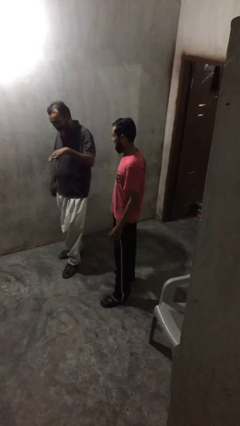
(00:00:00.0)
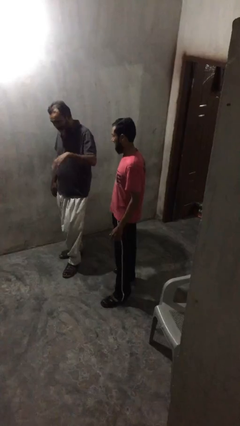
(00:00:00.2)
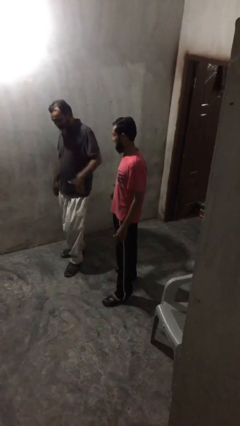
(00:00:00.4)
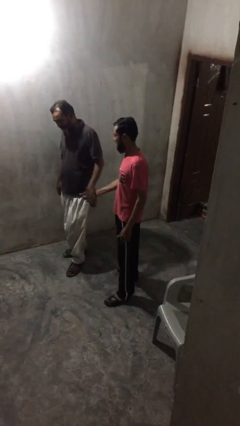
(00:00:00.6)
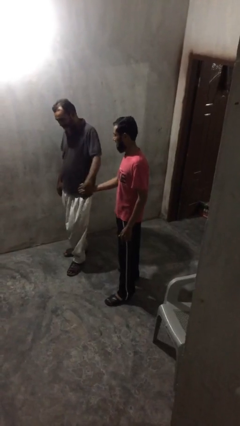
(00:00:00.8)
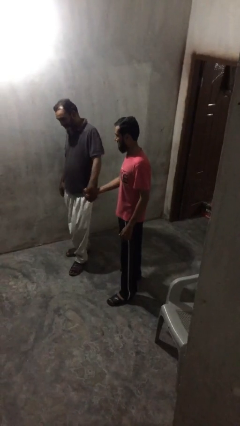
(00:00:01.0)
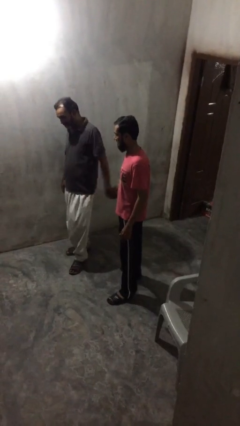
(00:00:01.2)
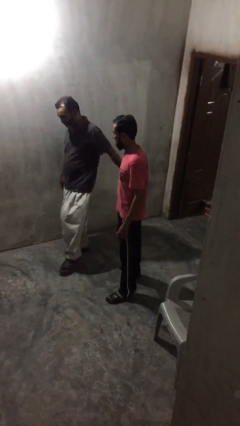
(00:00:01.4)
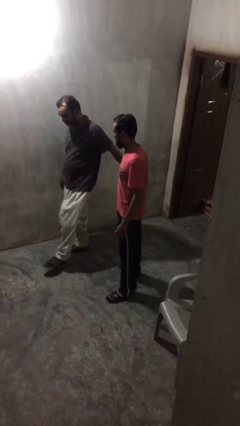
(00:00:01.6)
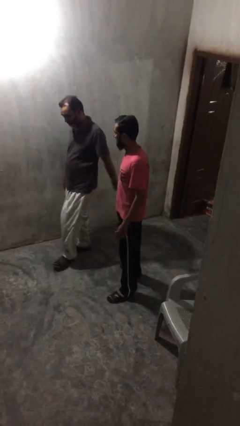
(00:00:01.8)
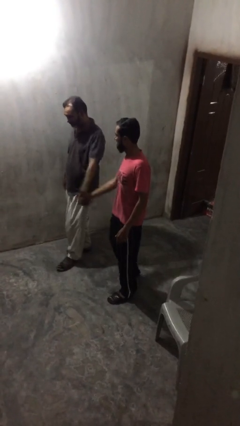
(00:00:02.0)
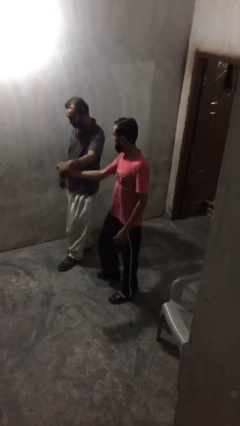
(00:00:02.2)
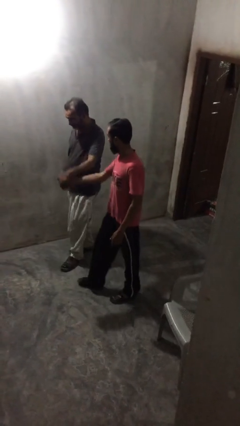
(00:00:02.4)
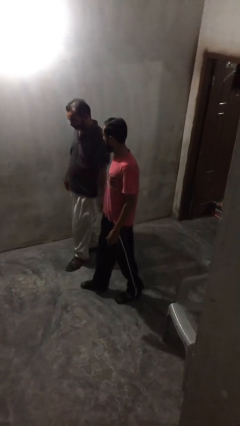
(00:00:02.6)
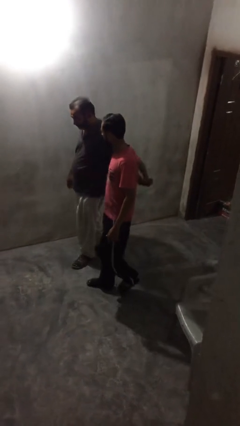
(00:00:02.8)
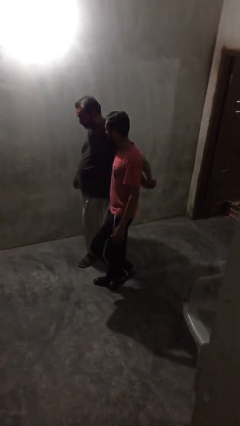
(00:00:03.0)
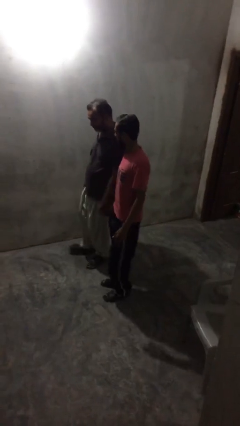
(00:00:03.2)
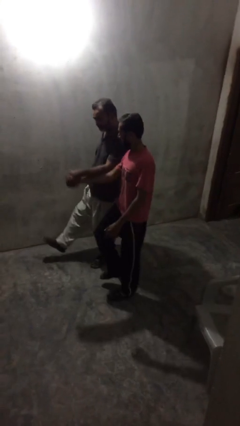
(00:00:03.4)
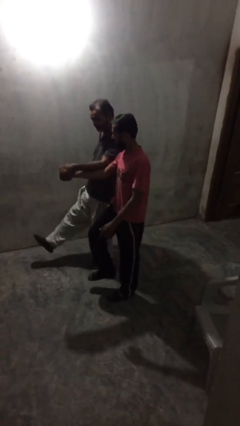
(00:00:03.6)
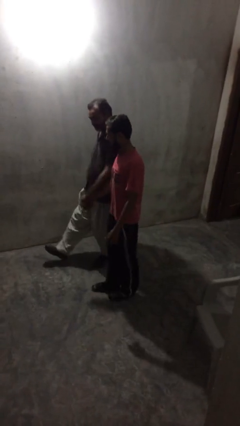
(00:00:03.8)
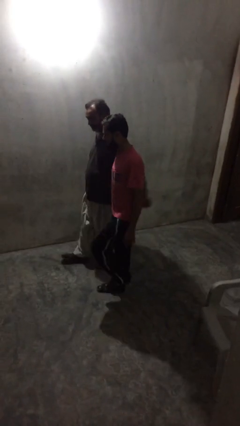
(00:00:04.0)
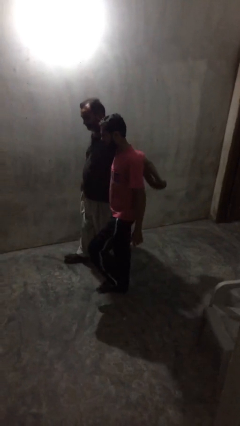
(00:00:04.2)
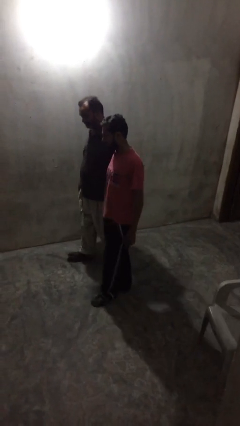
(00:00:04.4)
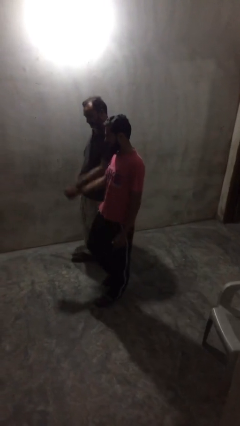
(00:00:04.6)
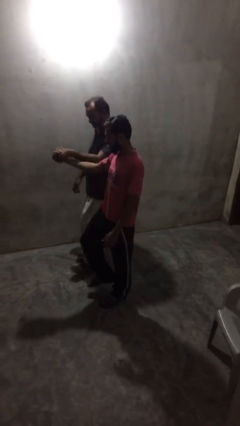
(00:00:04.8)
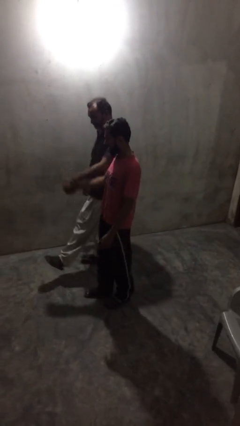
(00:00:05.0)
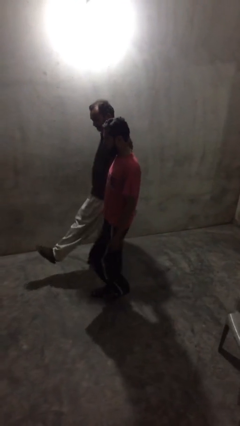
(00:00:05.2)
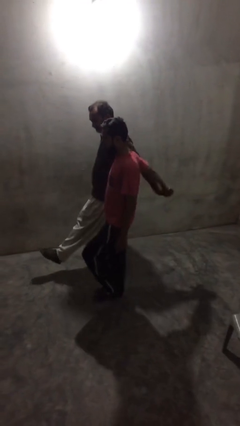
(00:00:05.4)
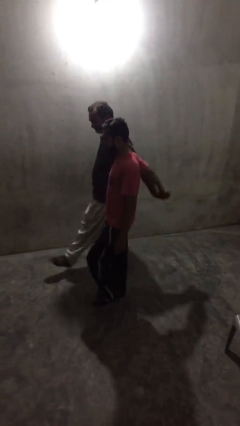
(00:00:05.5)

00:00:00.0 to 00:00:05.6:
person holds hand

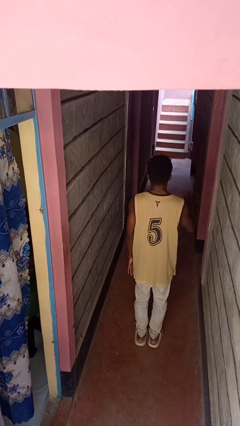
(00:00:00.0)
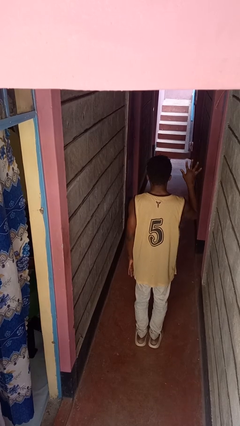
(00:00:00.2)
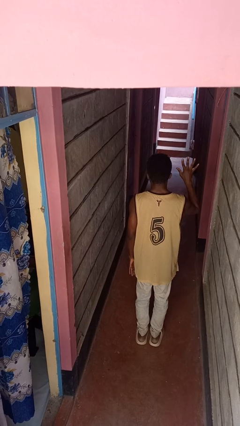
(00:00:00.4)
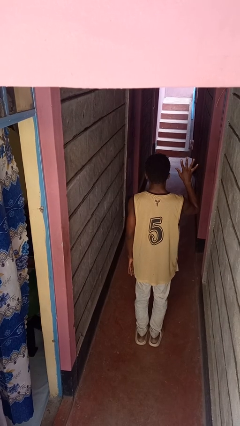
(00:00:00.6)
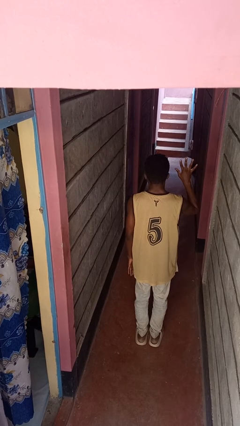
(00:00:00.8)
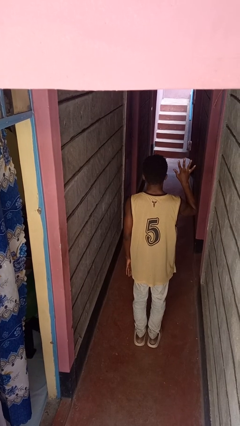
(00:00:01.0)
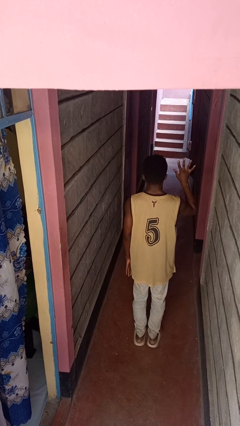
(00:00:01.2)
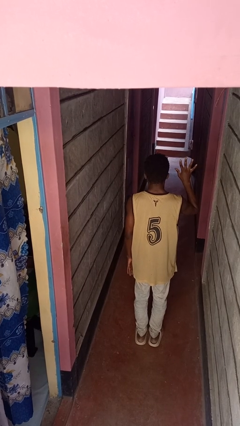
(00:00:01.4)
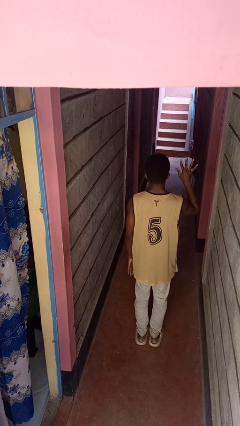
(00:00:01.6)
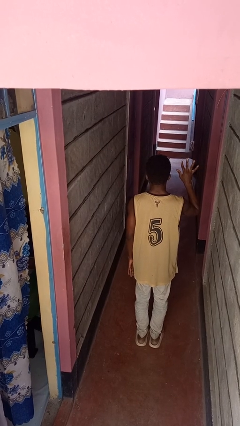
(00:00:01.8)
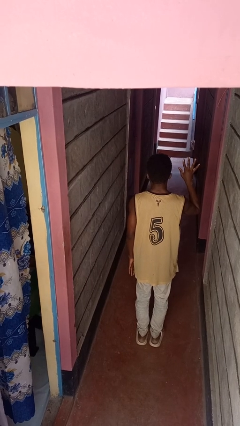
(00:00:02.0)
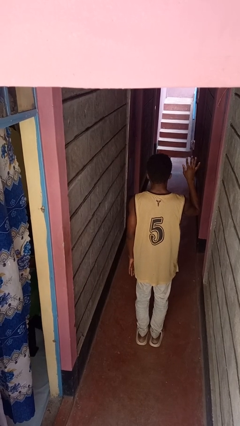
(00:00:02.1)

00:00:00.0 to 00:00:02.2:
person gestures number five

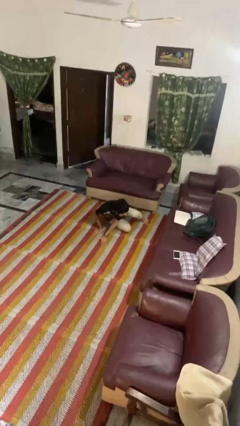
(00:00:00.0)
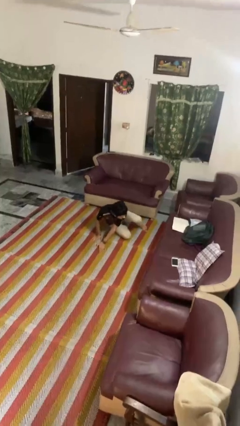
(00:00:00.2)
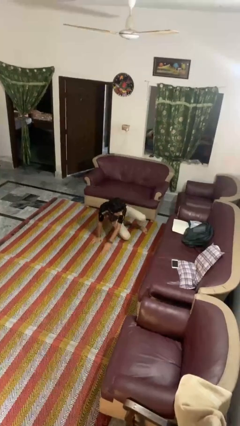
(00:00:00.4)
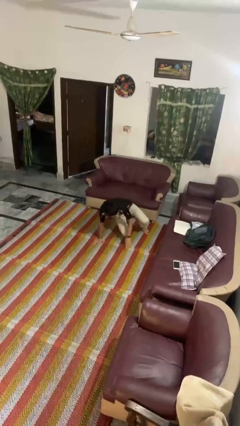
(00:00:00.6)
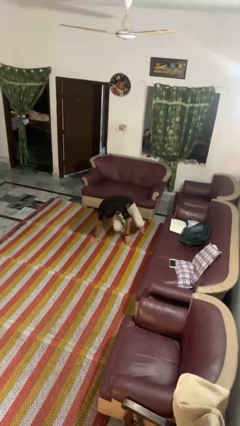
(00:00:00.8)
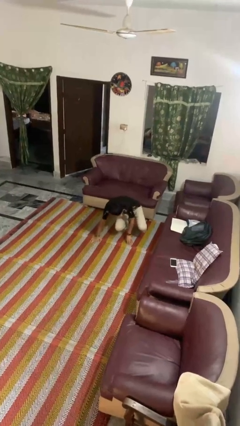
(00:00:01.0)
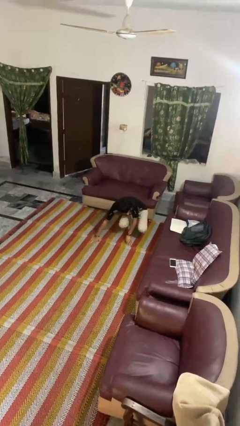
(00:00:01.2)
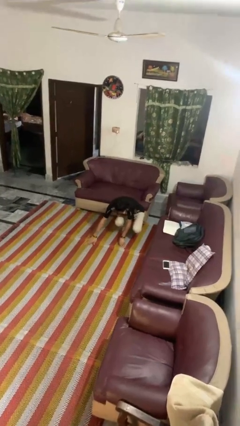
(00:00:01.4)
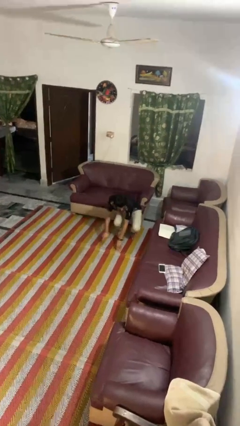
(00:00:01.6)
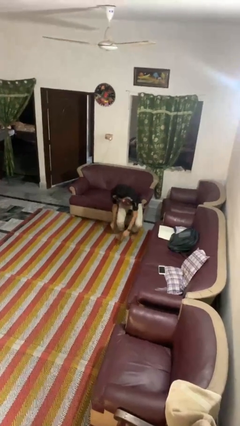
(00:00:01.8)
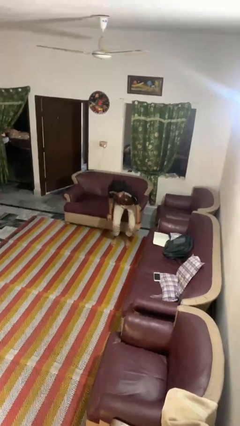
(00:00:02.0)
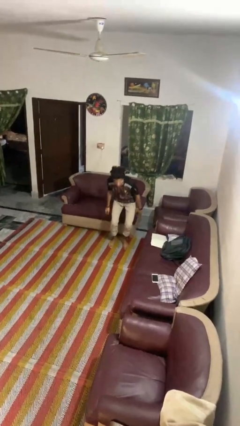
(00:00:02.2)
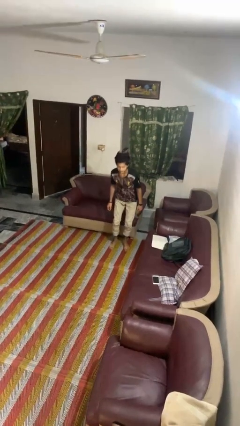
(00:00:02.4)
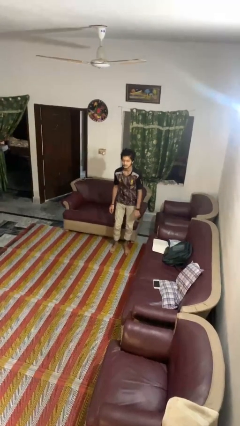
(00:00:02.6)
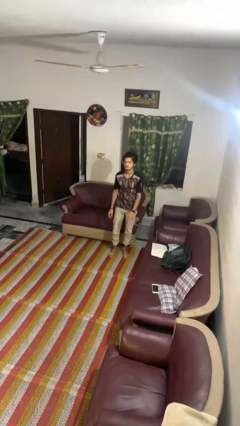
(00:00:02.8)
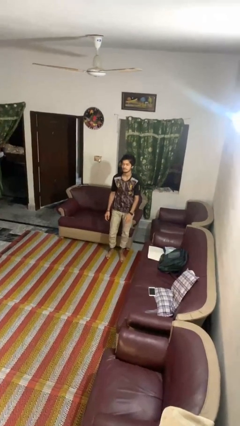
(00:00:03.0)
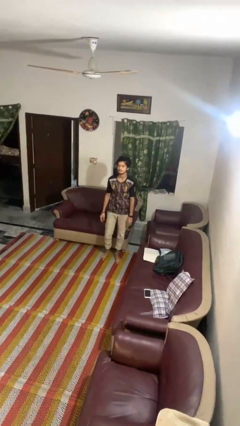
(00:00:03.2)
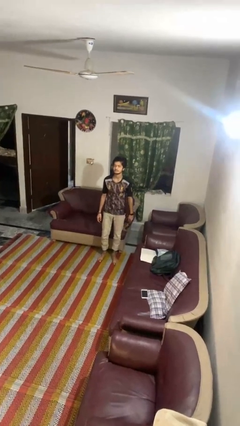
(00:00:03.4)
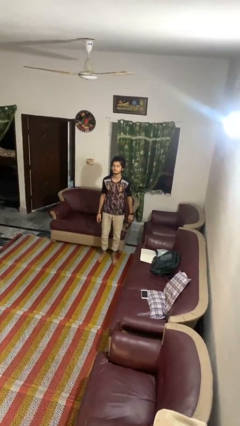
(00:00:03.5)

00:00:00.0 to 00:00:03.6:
person stands up from floor

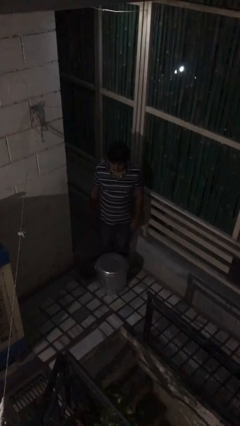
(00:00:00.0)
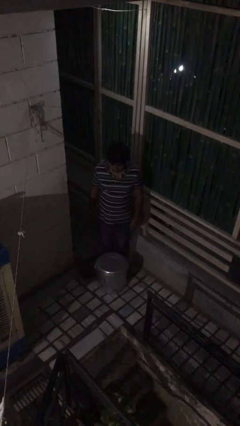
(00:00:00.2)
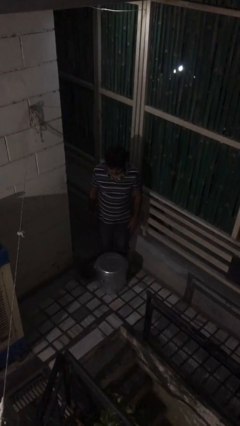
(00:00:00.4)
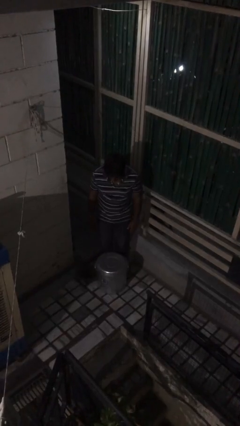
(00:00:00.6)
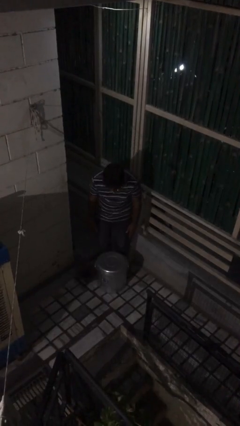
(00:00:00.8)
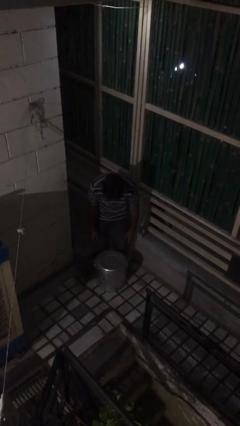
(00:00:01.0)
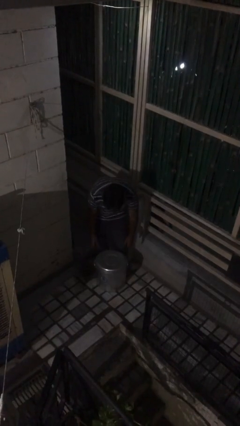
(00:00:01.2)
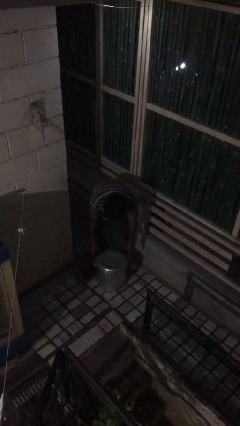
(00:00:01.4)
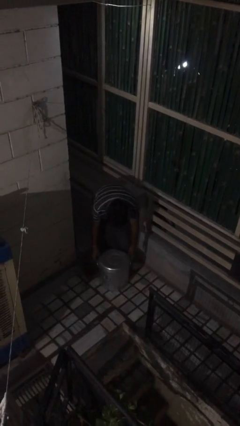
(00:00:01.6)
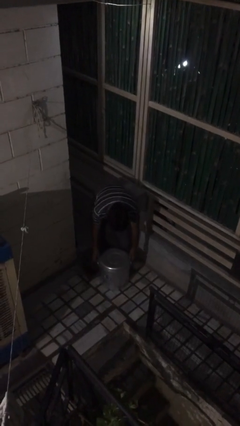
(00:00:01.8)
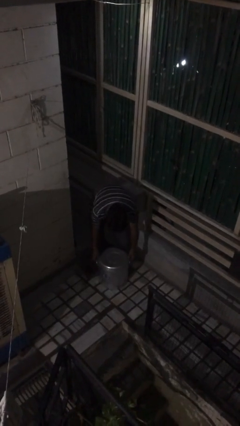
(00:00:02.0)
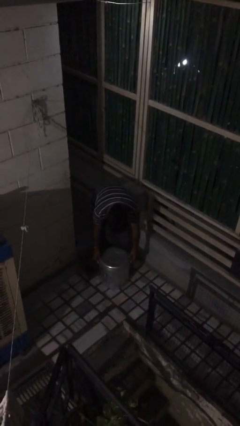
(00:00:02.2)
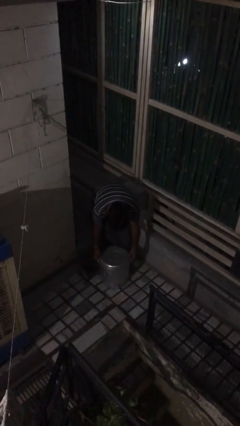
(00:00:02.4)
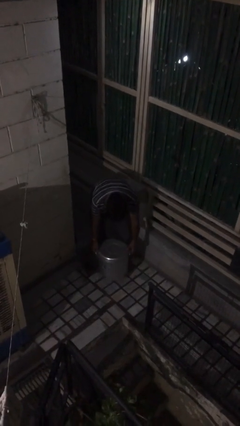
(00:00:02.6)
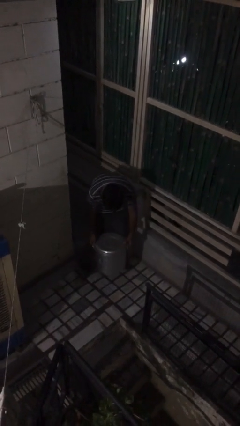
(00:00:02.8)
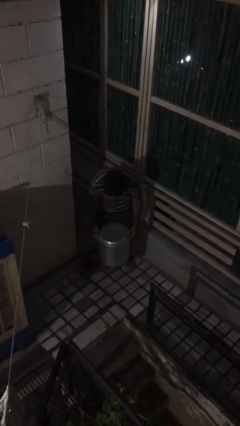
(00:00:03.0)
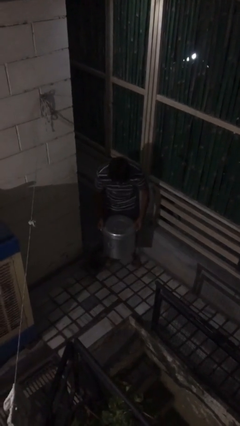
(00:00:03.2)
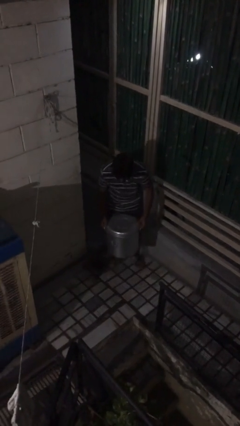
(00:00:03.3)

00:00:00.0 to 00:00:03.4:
person picks up object from floor

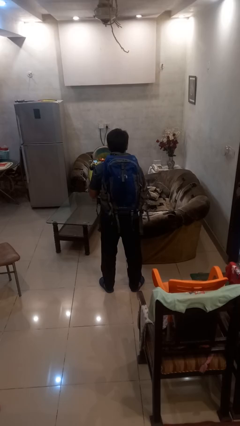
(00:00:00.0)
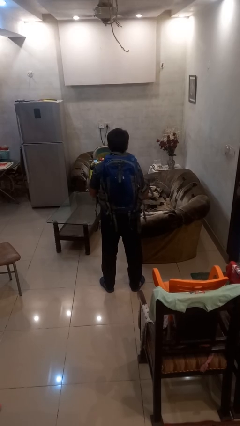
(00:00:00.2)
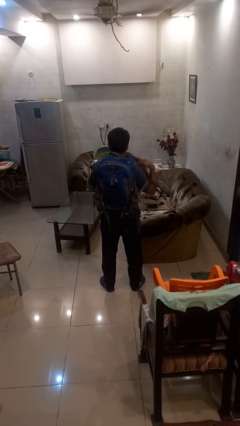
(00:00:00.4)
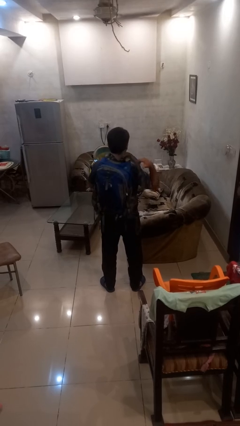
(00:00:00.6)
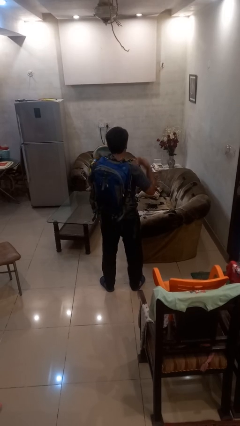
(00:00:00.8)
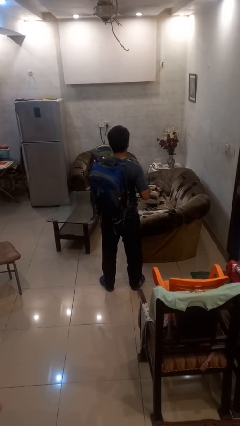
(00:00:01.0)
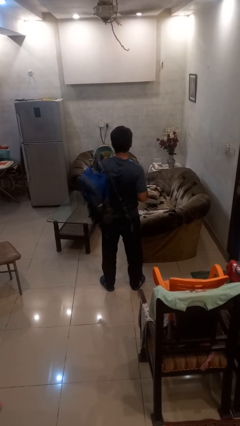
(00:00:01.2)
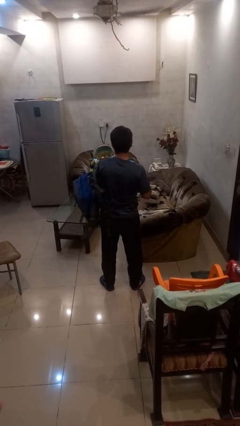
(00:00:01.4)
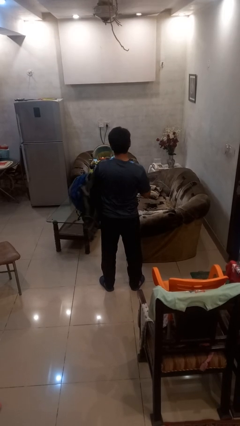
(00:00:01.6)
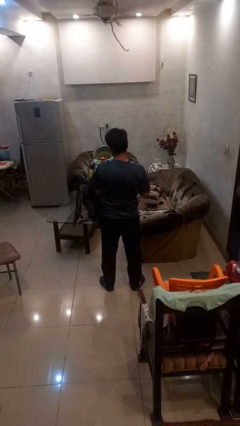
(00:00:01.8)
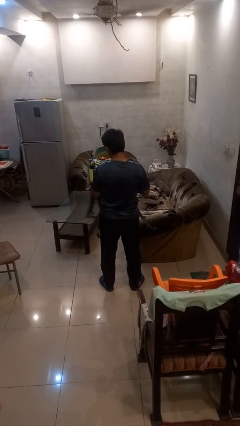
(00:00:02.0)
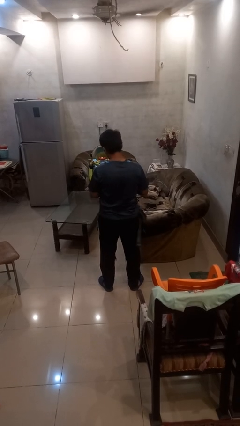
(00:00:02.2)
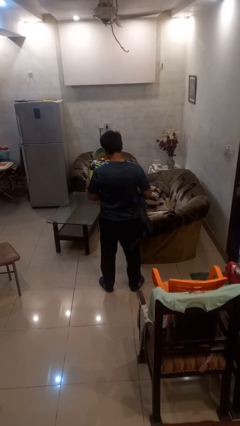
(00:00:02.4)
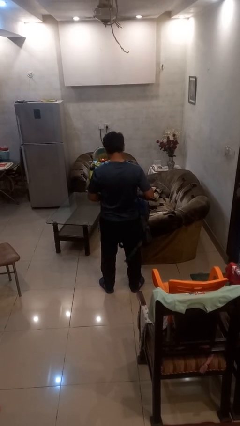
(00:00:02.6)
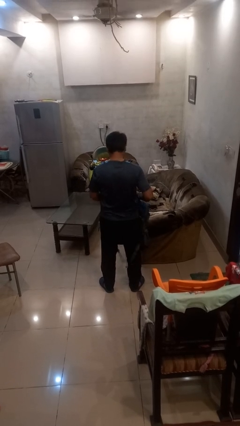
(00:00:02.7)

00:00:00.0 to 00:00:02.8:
person takes off backpack
